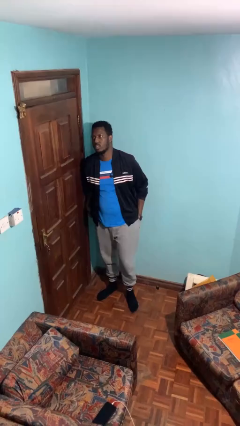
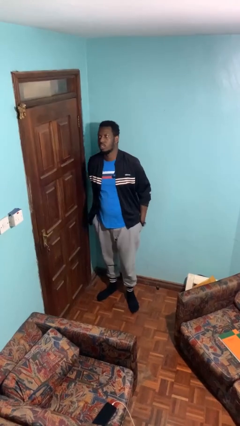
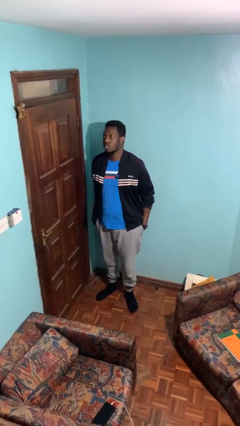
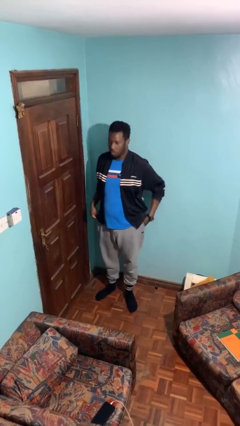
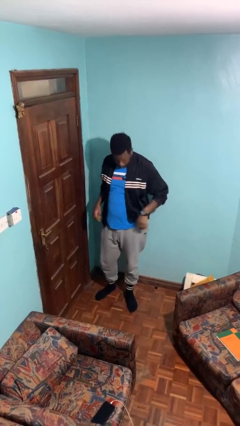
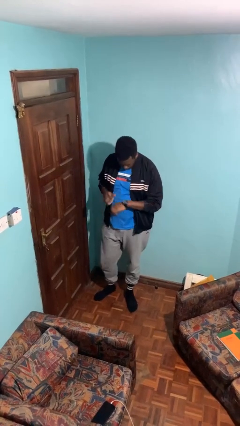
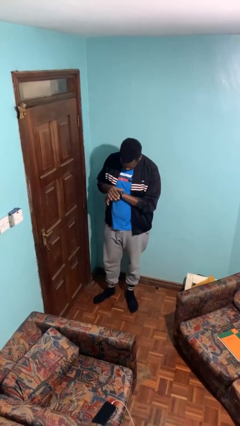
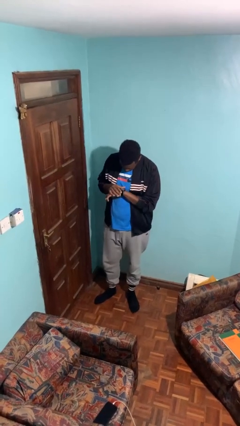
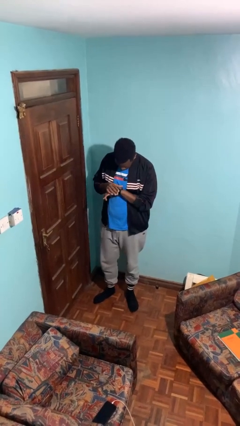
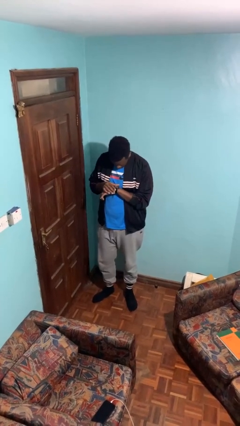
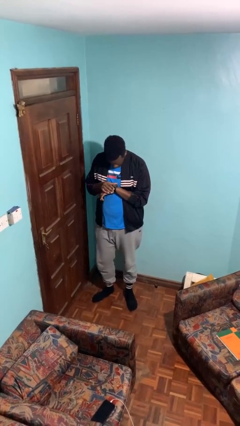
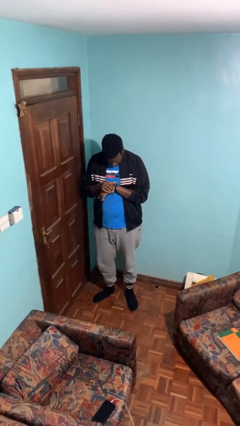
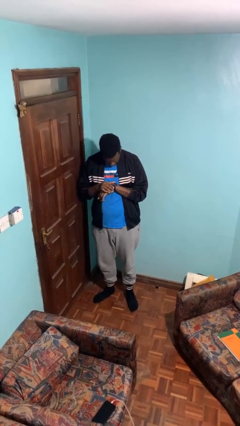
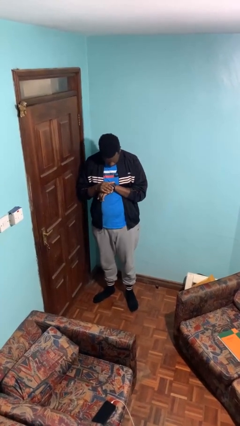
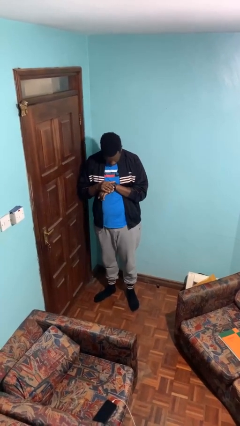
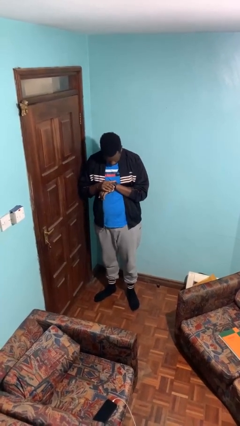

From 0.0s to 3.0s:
person looks at wristwatch

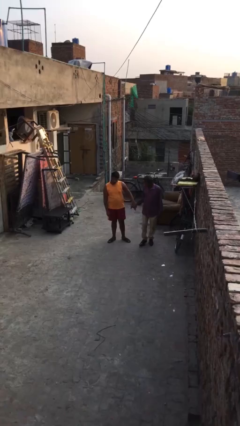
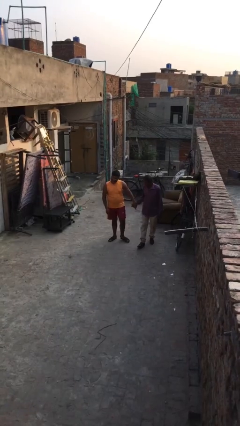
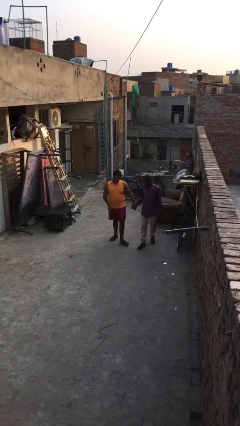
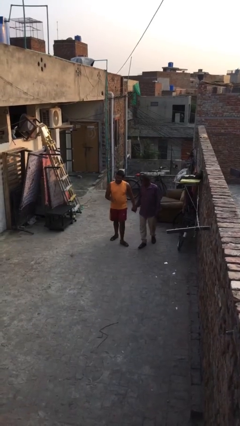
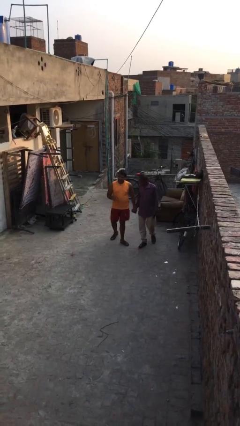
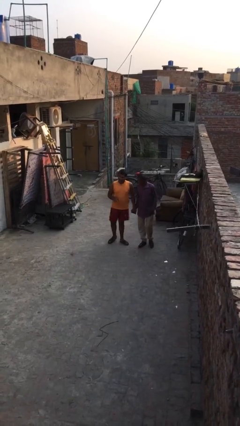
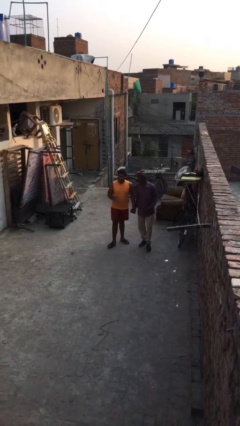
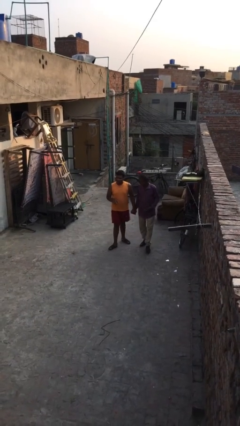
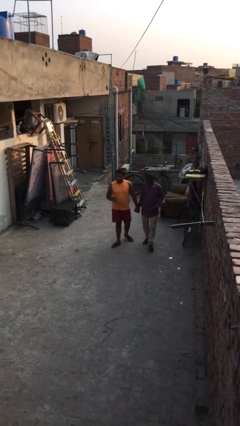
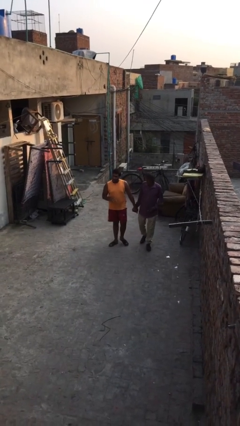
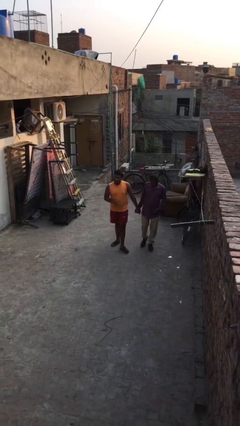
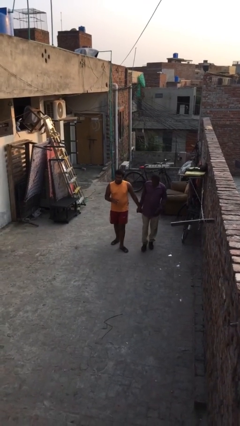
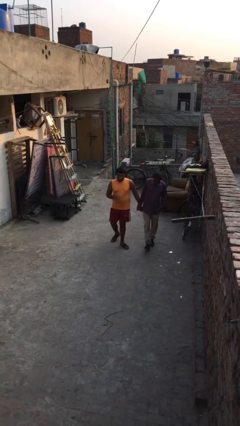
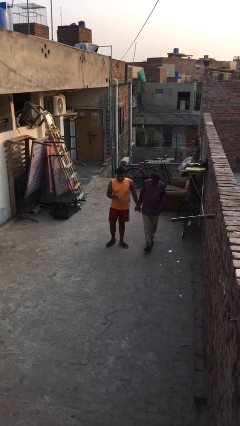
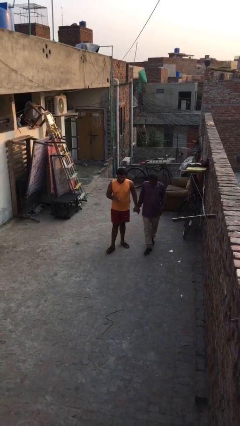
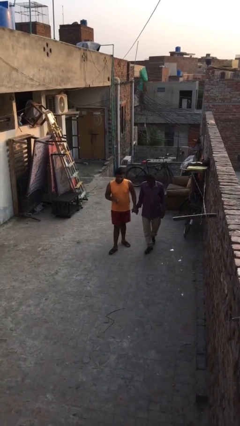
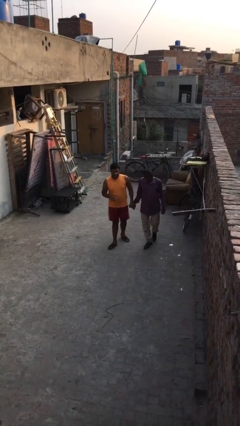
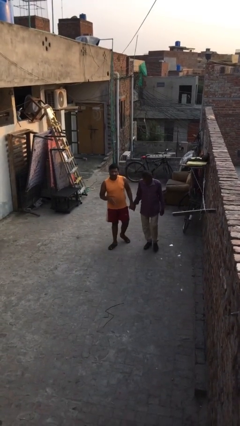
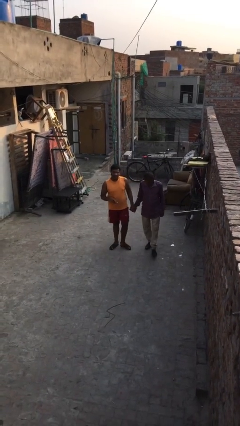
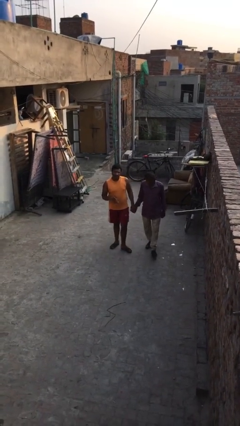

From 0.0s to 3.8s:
person holds hand

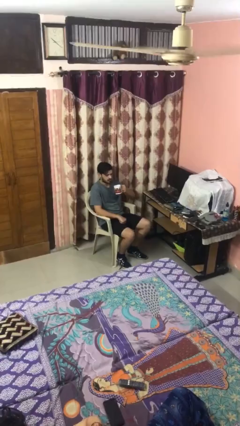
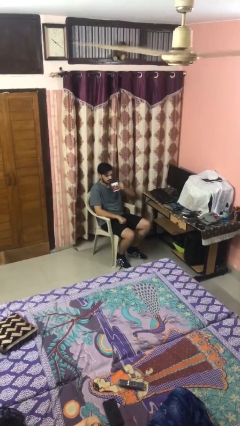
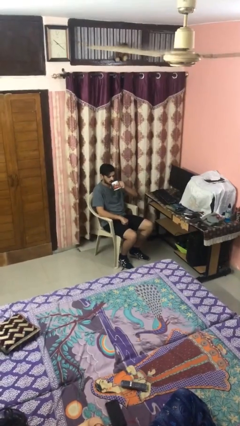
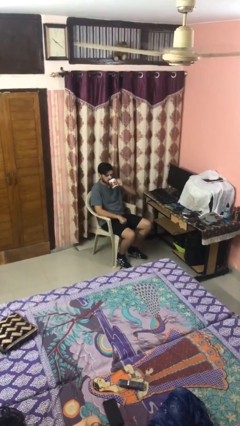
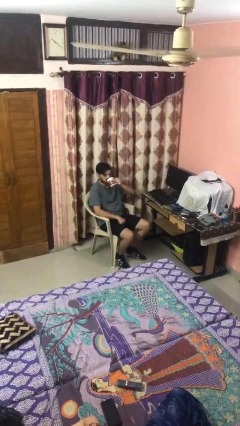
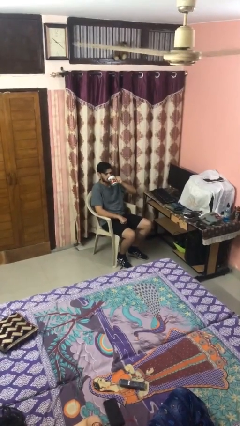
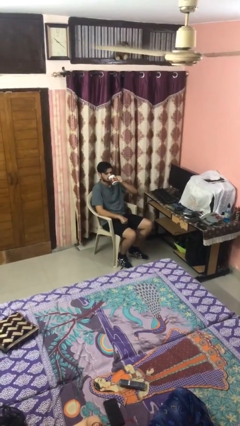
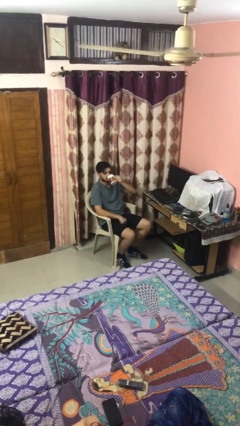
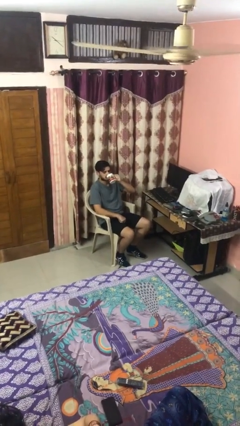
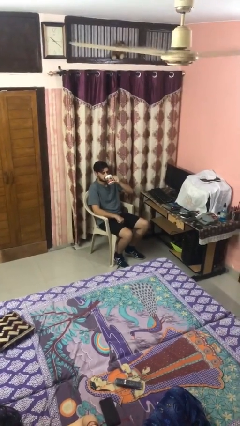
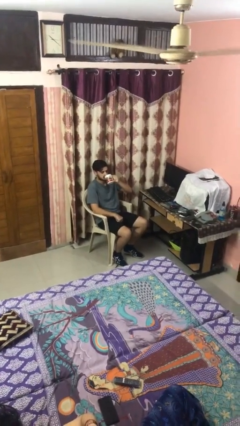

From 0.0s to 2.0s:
person drinks from mug

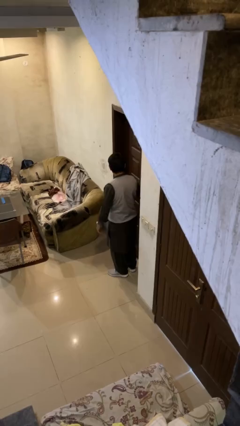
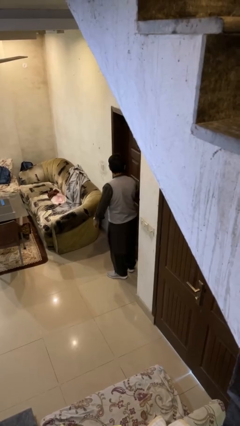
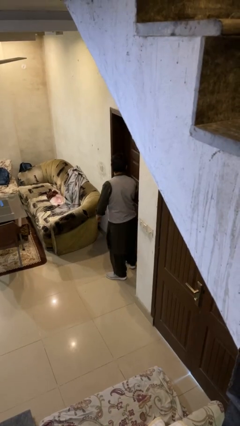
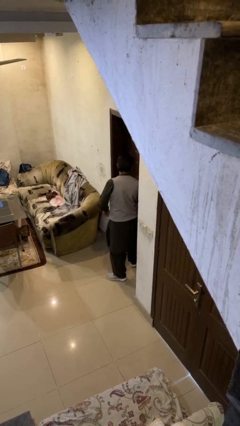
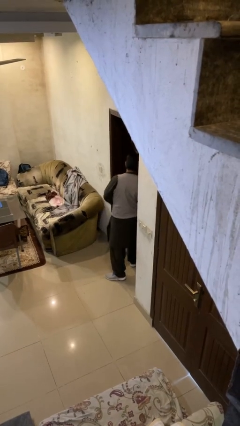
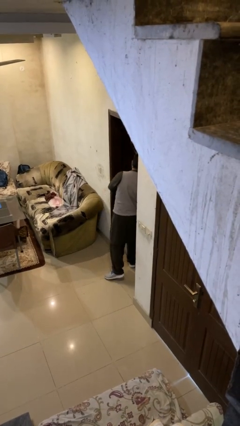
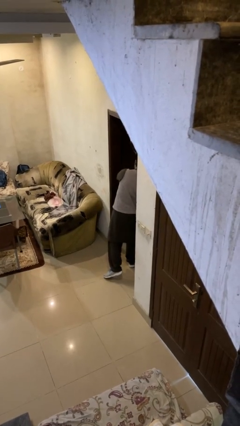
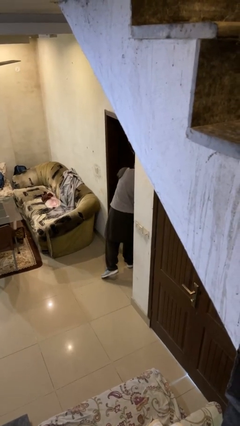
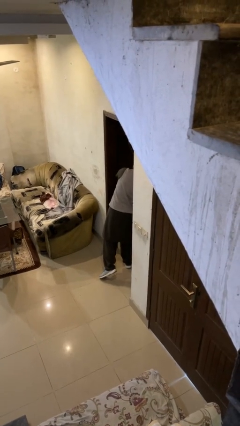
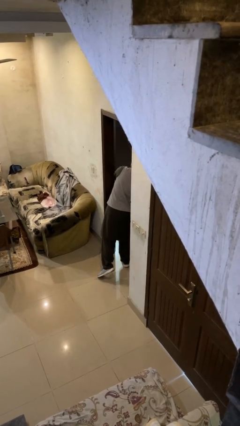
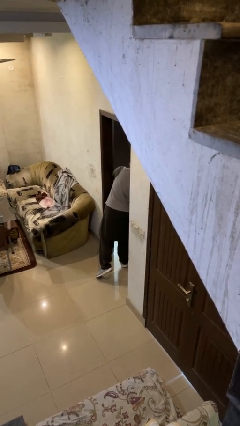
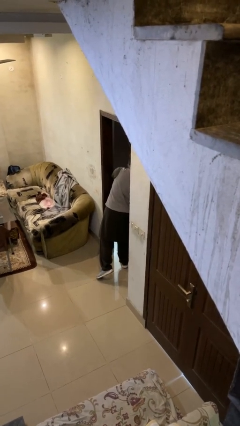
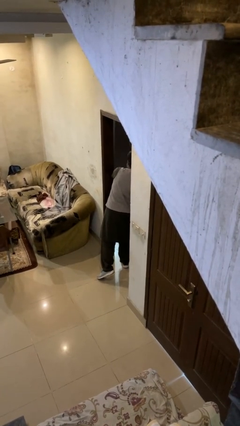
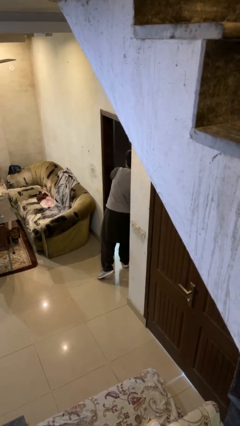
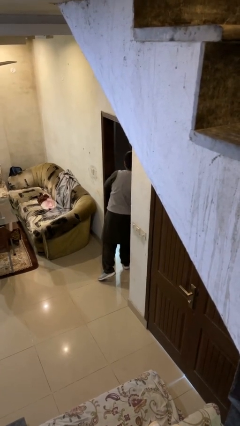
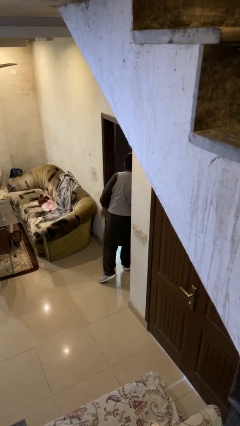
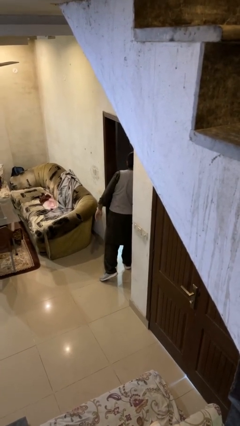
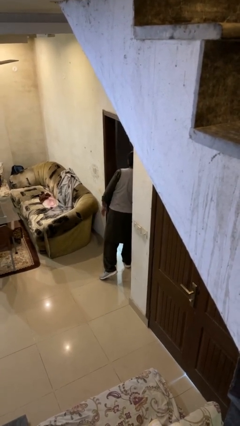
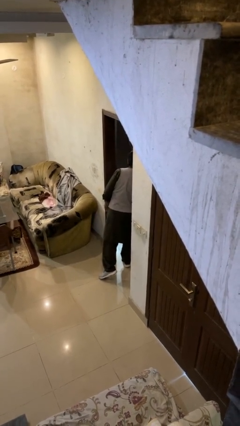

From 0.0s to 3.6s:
person opens facility door

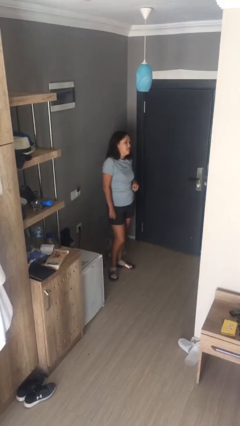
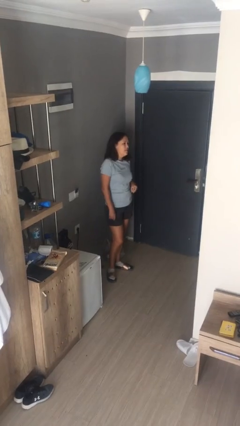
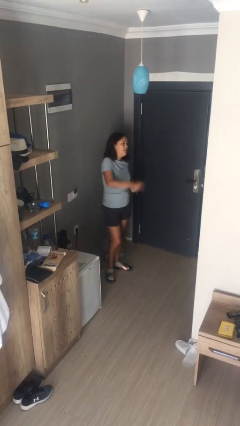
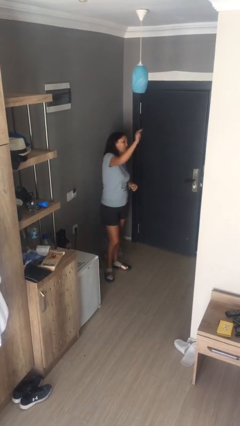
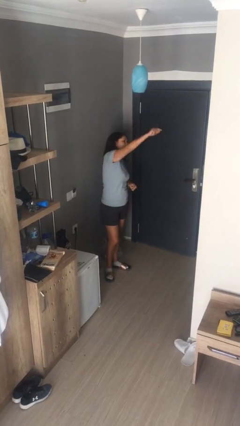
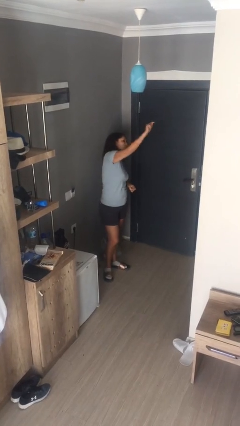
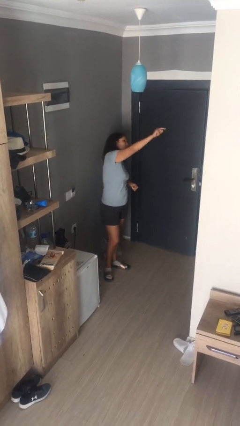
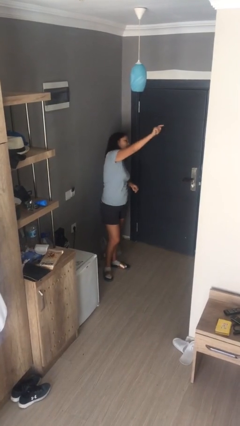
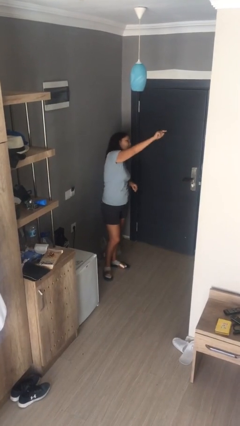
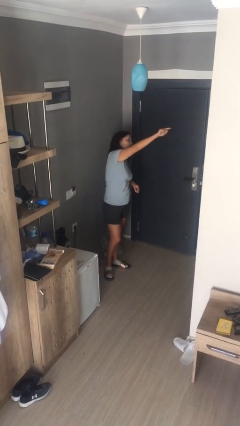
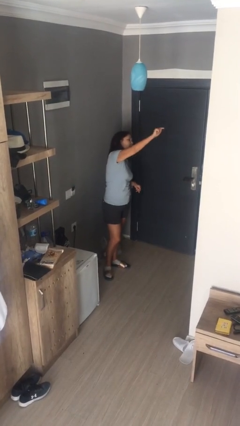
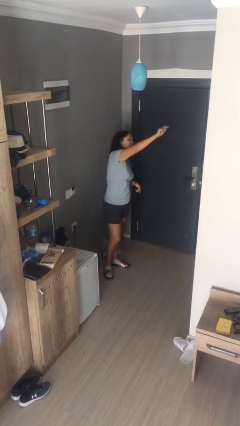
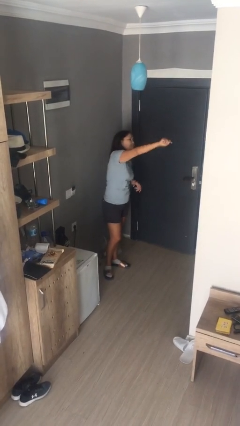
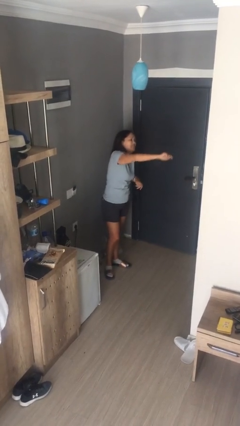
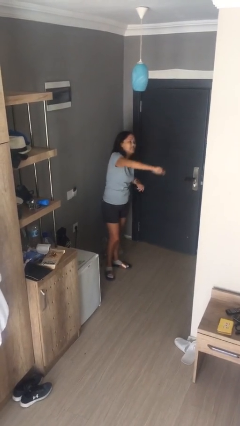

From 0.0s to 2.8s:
person points at person

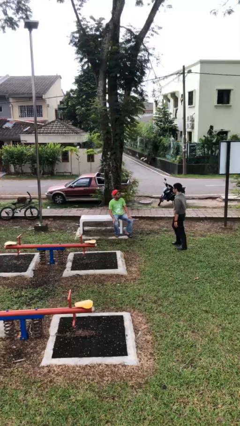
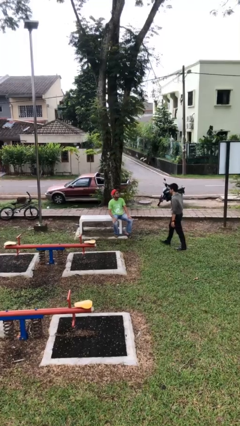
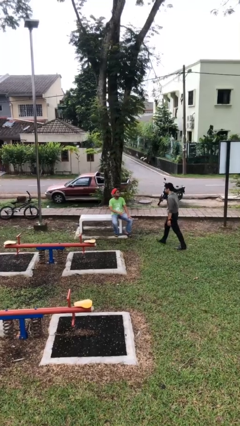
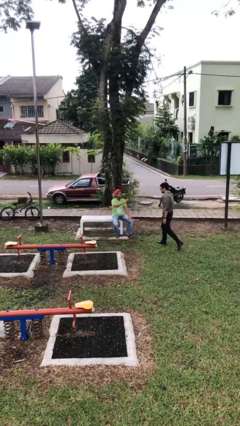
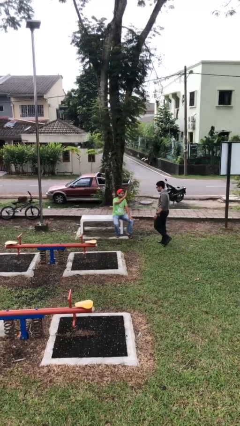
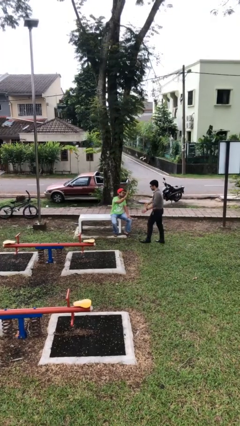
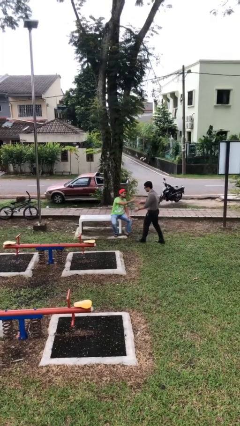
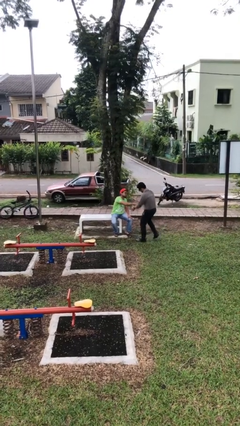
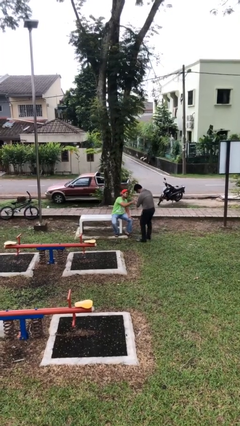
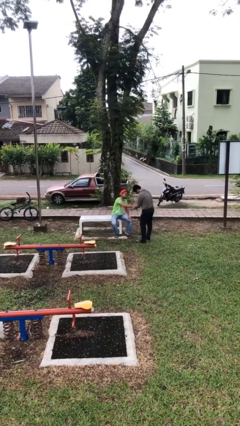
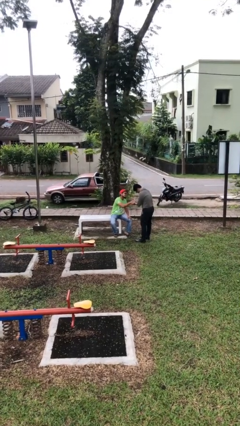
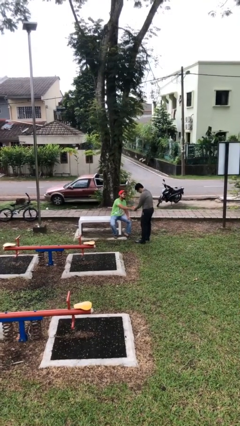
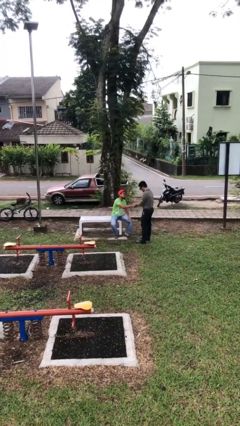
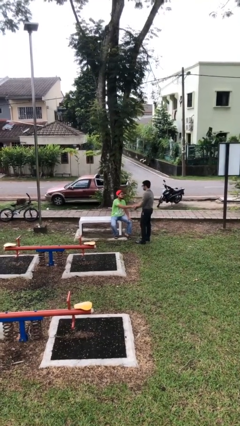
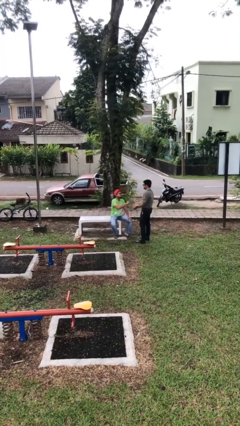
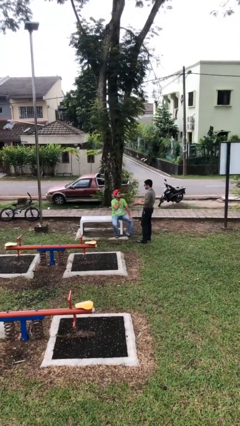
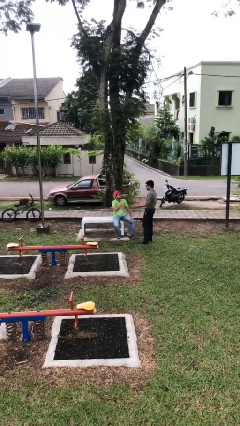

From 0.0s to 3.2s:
person shakes hand
